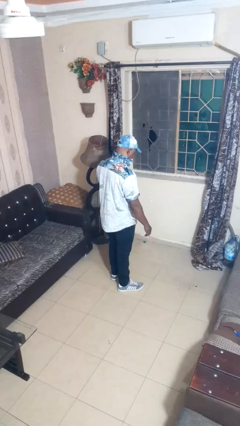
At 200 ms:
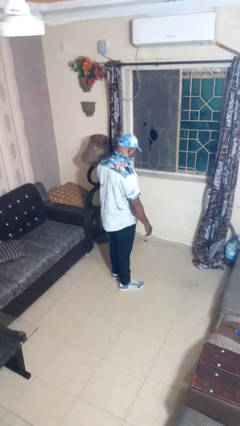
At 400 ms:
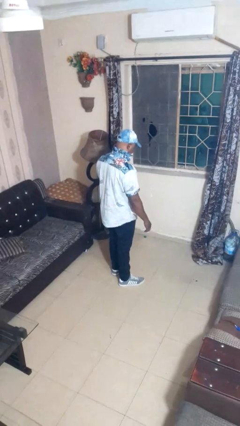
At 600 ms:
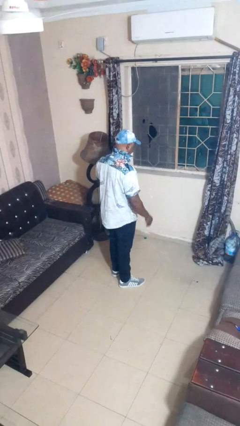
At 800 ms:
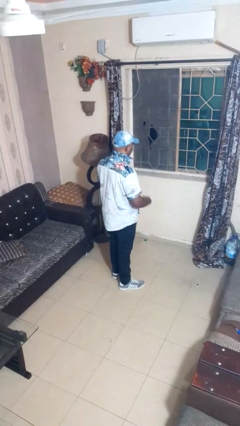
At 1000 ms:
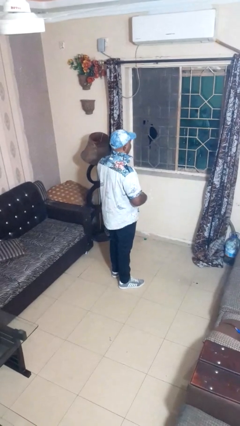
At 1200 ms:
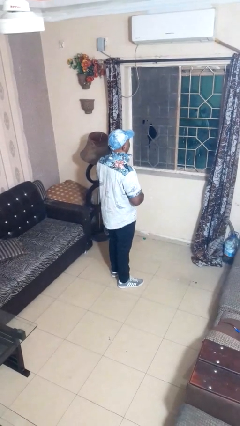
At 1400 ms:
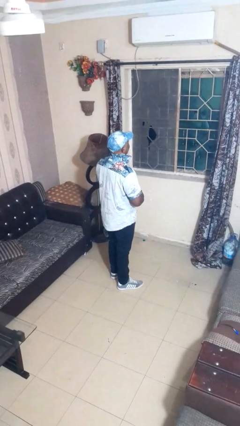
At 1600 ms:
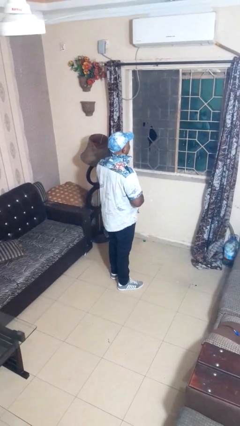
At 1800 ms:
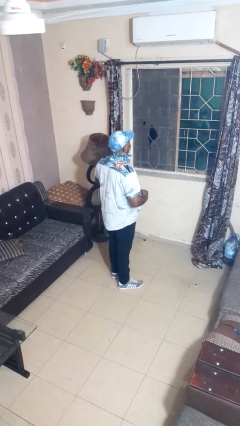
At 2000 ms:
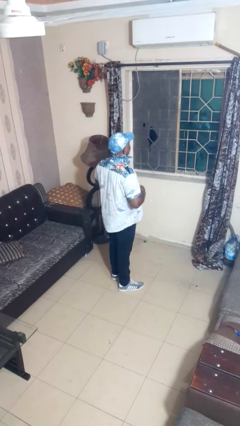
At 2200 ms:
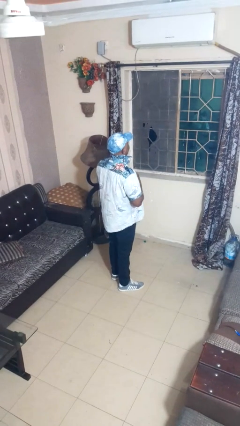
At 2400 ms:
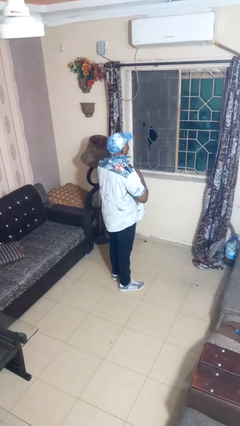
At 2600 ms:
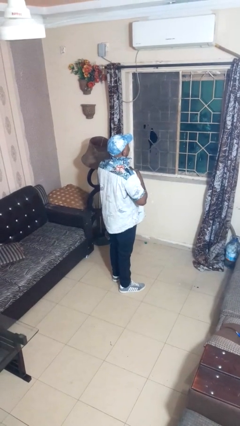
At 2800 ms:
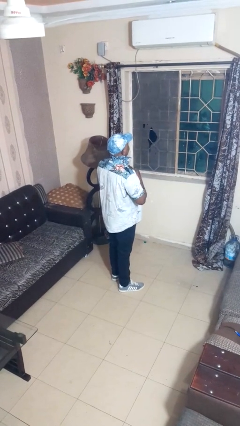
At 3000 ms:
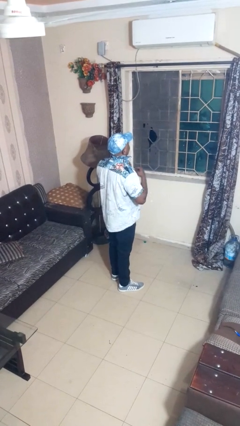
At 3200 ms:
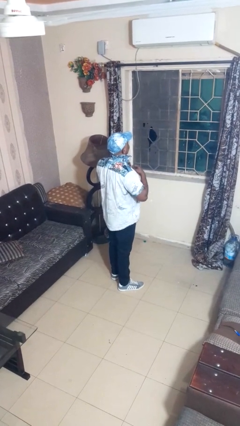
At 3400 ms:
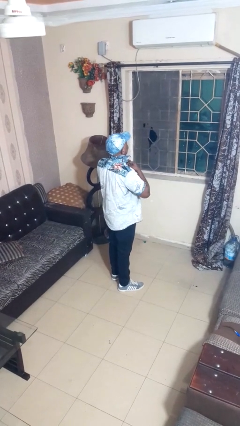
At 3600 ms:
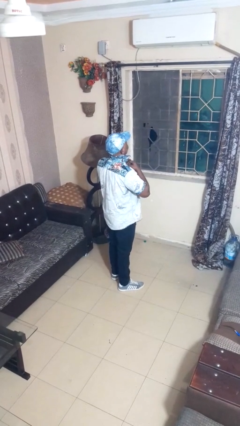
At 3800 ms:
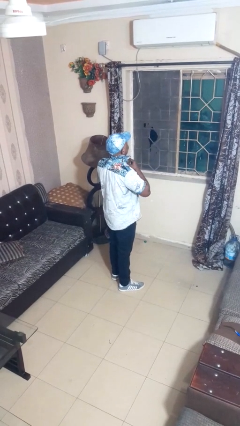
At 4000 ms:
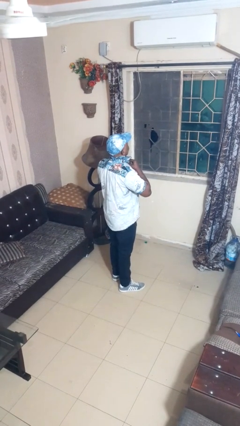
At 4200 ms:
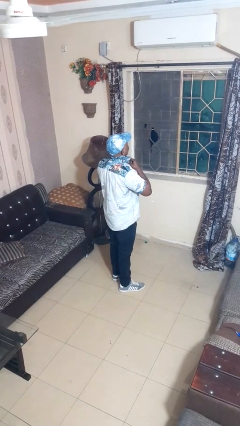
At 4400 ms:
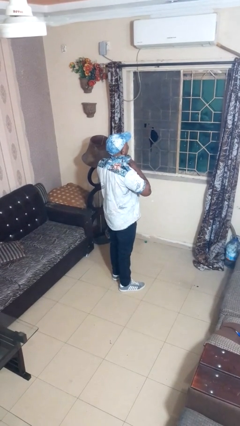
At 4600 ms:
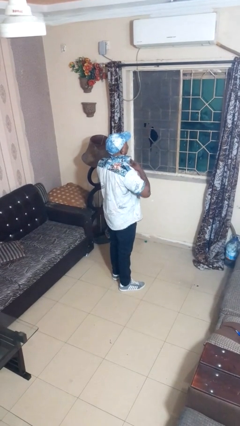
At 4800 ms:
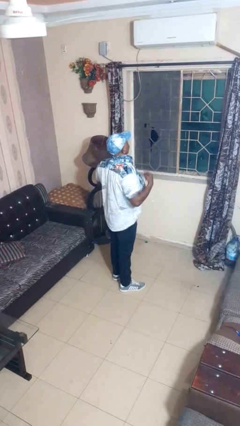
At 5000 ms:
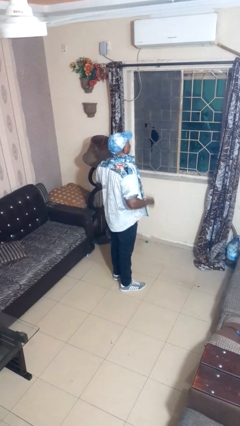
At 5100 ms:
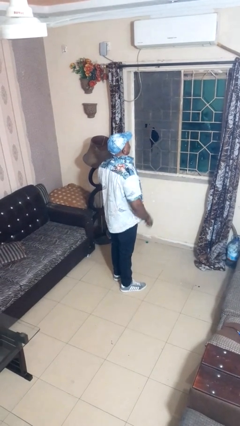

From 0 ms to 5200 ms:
person unbuttons shirt

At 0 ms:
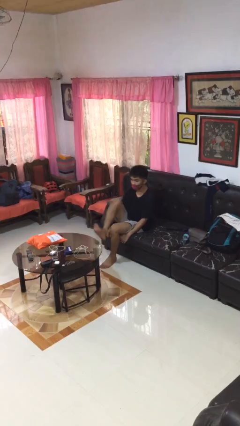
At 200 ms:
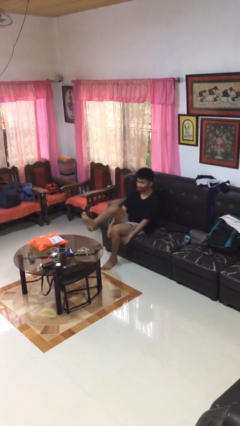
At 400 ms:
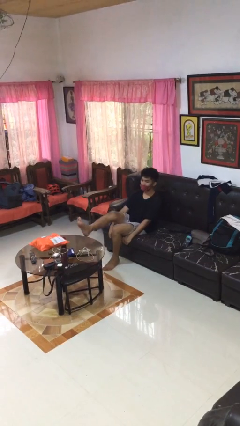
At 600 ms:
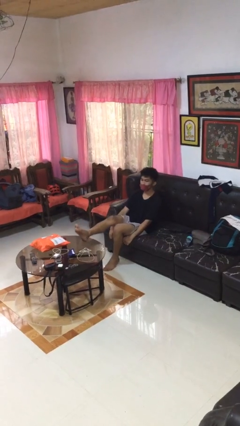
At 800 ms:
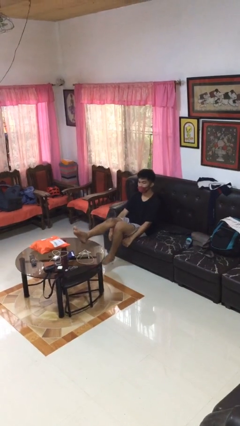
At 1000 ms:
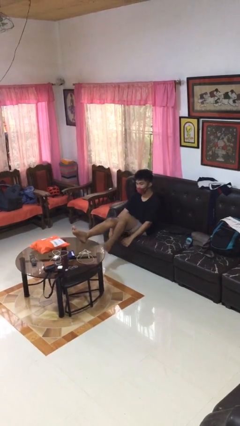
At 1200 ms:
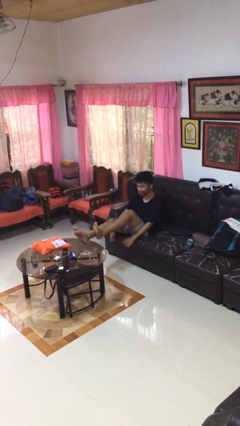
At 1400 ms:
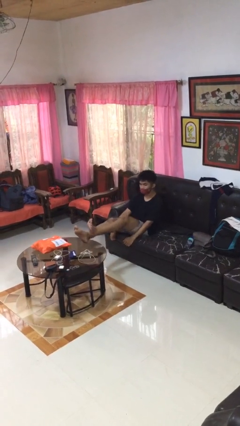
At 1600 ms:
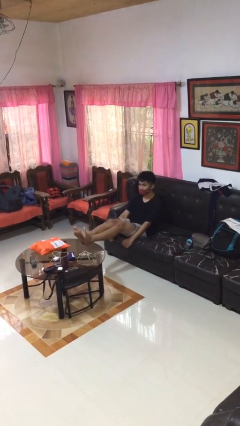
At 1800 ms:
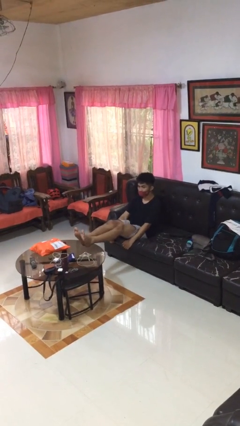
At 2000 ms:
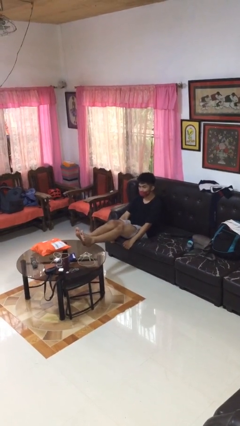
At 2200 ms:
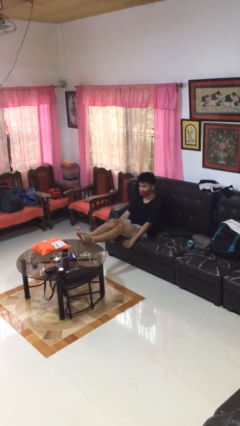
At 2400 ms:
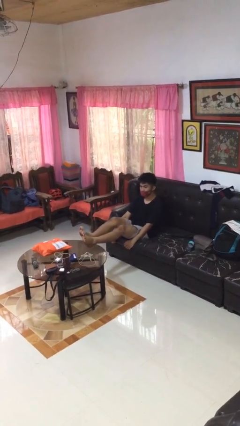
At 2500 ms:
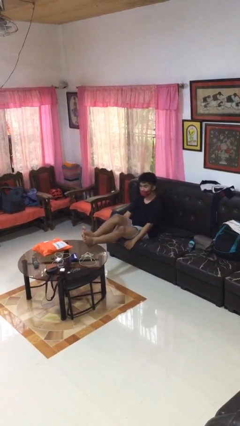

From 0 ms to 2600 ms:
person puts feet up

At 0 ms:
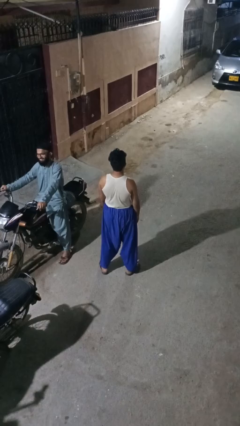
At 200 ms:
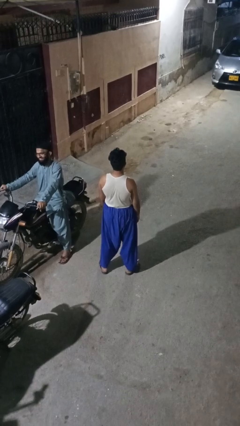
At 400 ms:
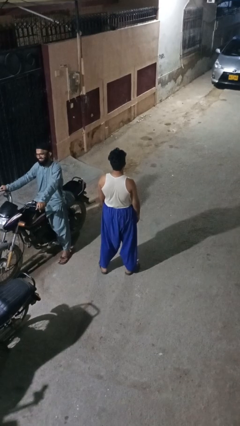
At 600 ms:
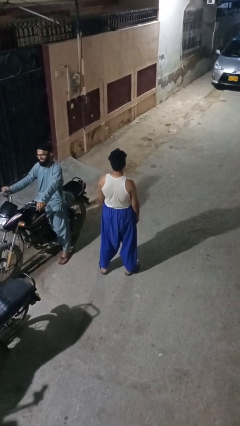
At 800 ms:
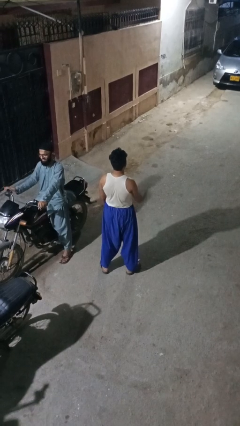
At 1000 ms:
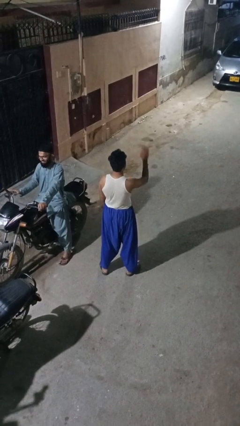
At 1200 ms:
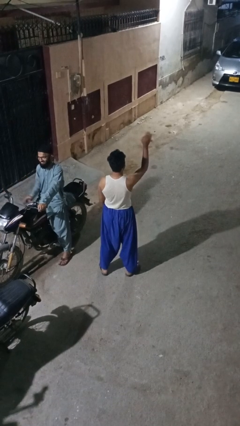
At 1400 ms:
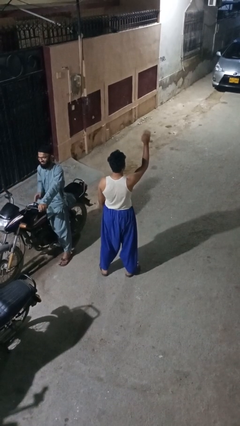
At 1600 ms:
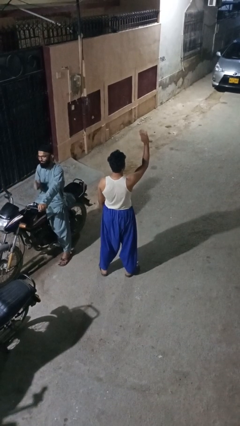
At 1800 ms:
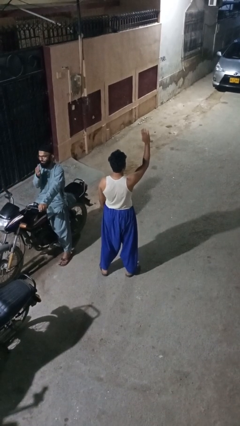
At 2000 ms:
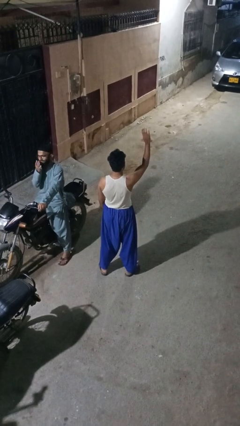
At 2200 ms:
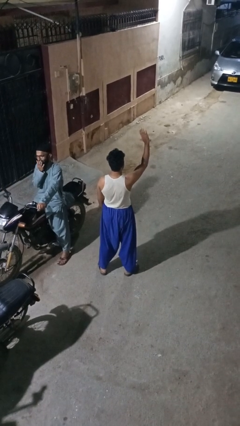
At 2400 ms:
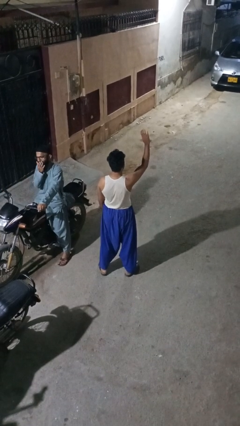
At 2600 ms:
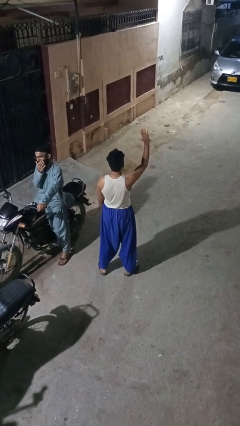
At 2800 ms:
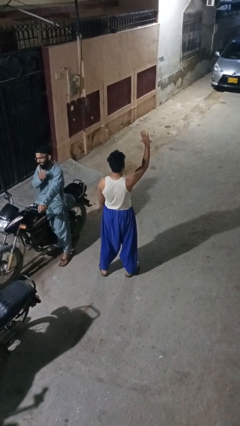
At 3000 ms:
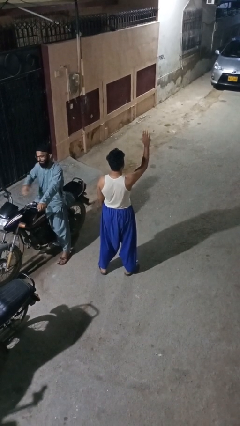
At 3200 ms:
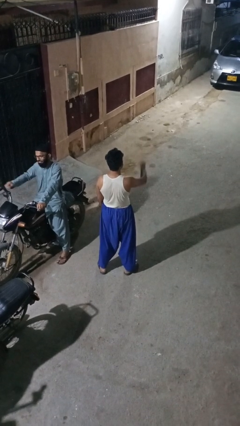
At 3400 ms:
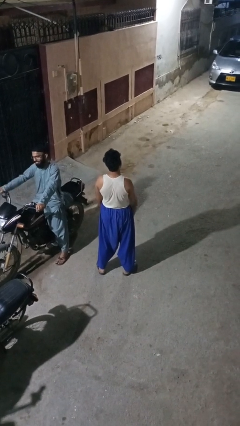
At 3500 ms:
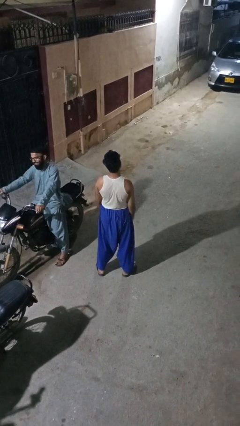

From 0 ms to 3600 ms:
person waves at person

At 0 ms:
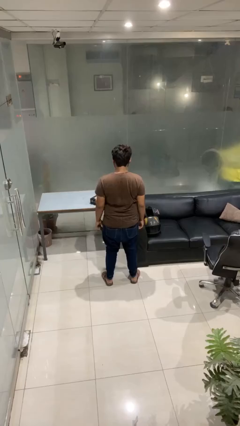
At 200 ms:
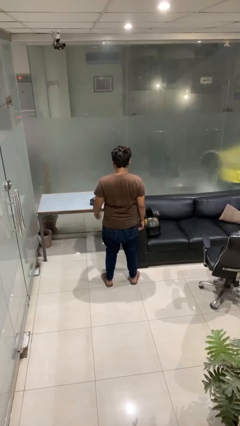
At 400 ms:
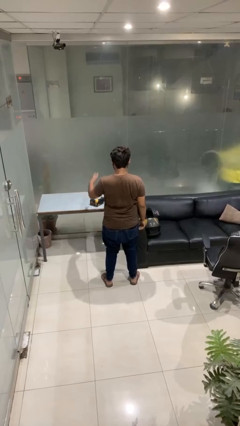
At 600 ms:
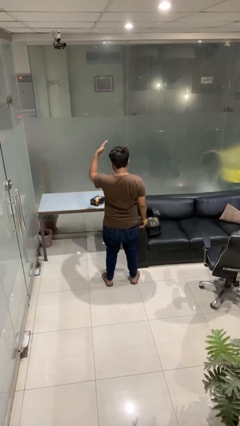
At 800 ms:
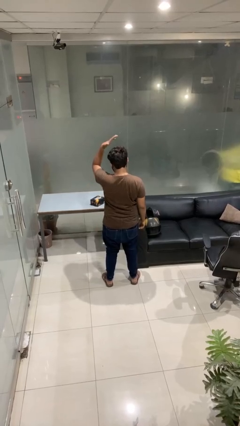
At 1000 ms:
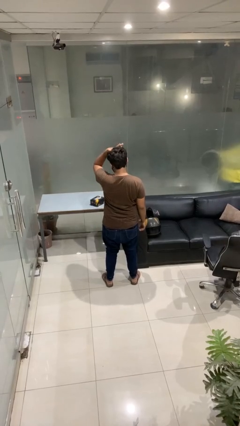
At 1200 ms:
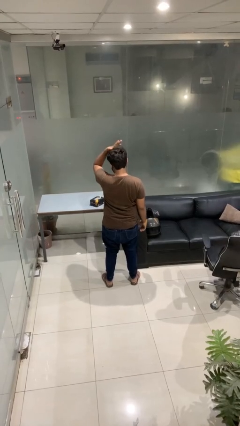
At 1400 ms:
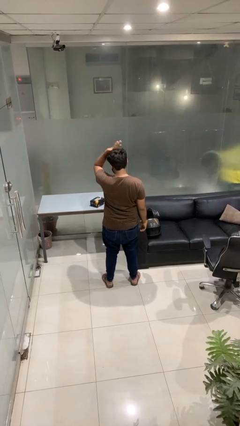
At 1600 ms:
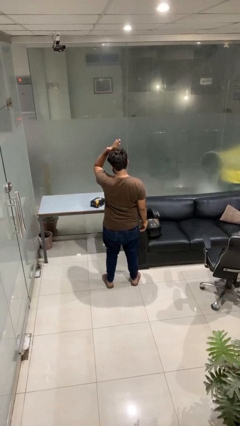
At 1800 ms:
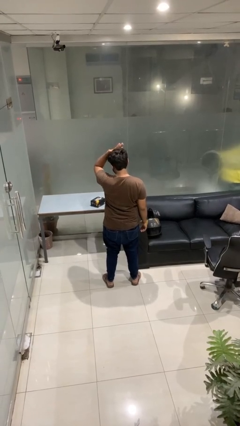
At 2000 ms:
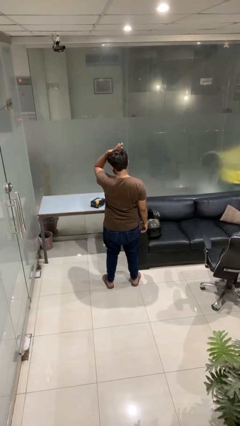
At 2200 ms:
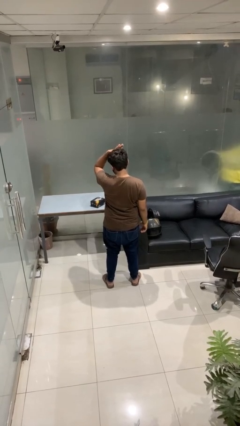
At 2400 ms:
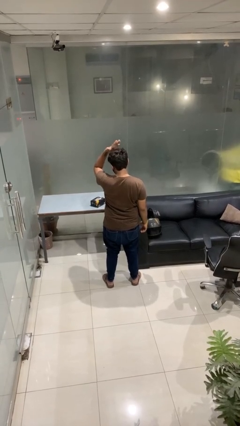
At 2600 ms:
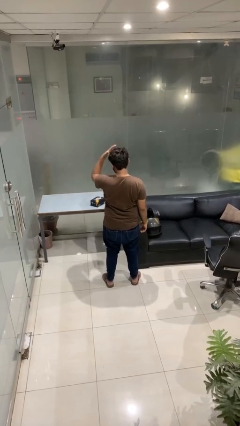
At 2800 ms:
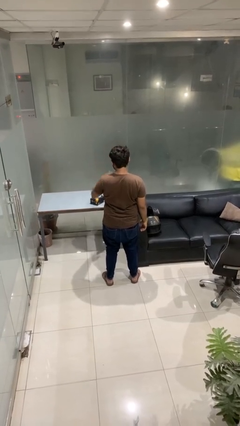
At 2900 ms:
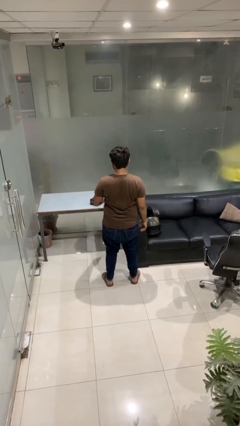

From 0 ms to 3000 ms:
person pats head

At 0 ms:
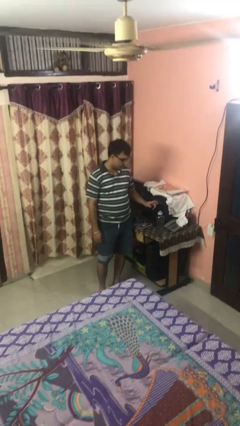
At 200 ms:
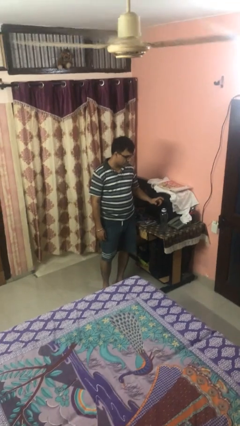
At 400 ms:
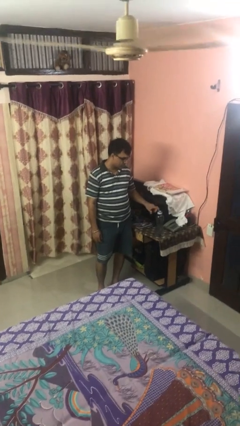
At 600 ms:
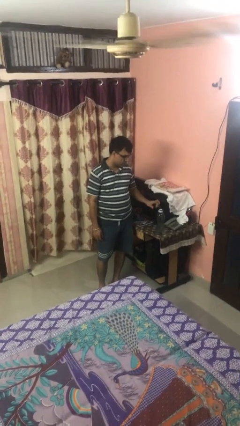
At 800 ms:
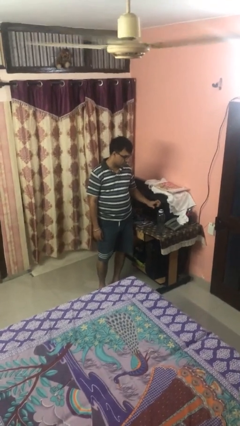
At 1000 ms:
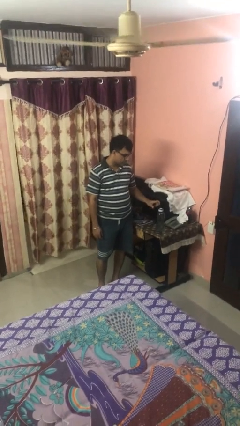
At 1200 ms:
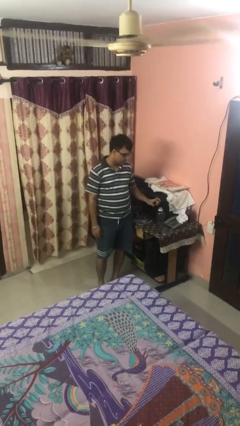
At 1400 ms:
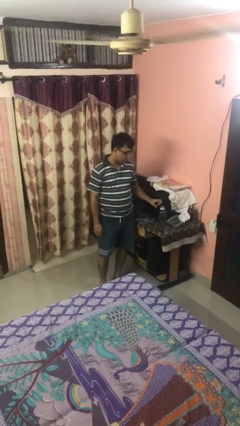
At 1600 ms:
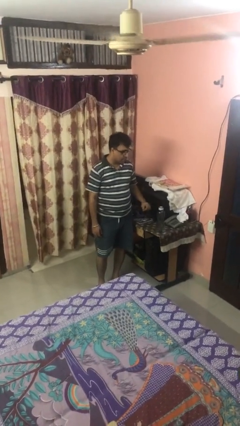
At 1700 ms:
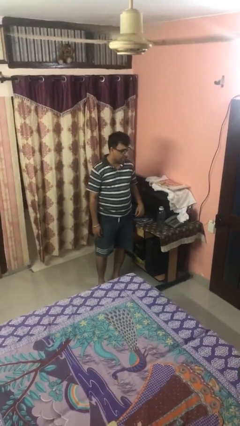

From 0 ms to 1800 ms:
person taps object with finger

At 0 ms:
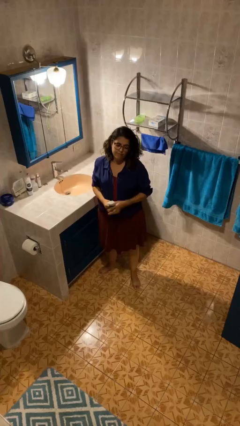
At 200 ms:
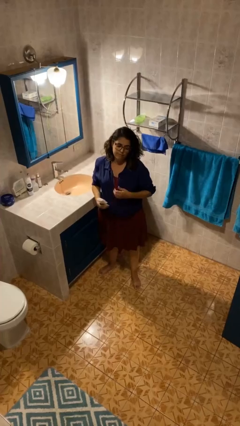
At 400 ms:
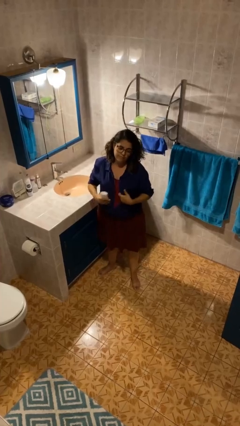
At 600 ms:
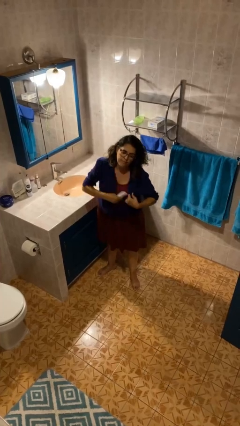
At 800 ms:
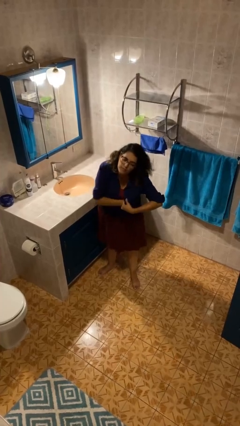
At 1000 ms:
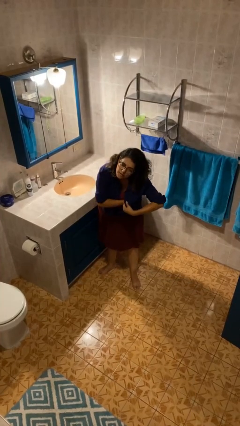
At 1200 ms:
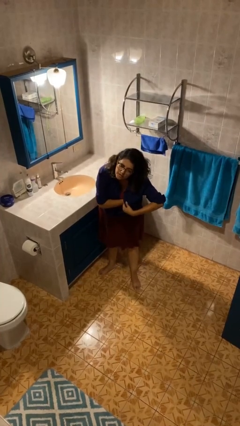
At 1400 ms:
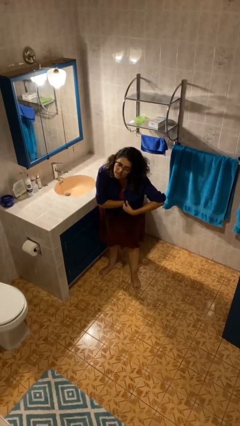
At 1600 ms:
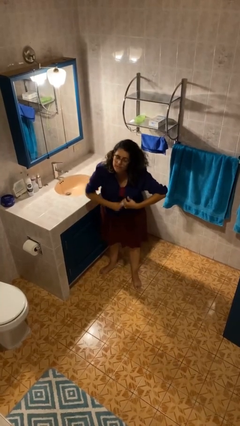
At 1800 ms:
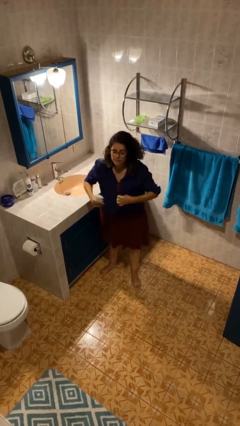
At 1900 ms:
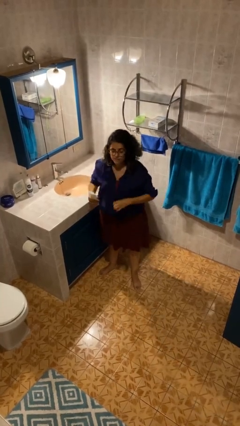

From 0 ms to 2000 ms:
person applies deodorant
